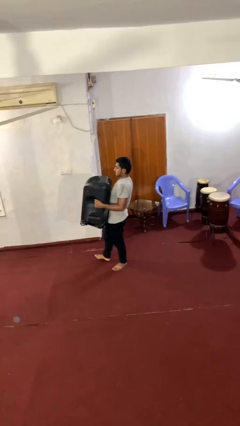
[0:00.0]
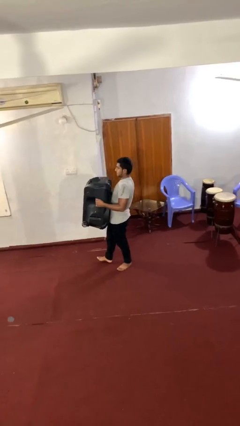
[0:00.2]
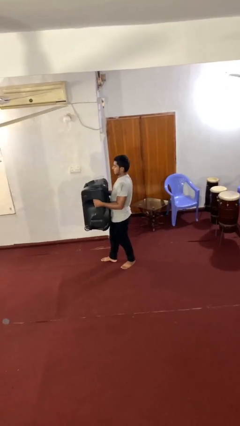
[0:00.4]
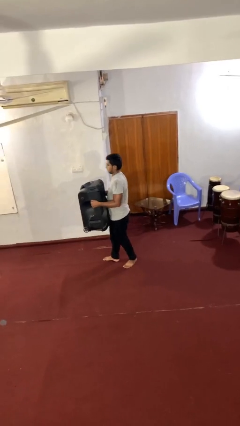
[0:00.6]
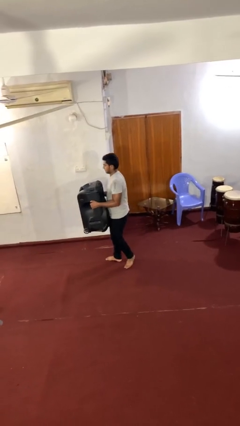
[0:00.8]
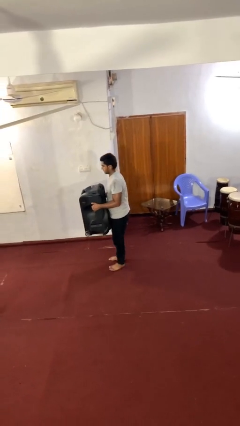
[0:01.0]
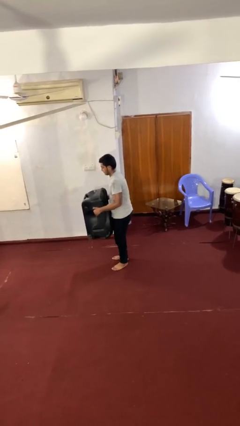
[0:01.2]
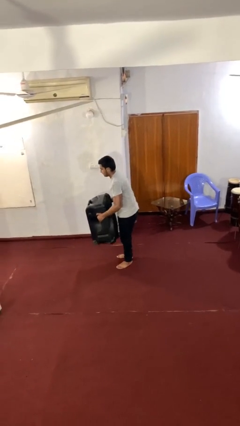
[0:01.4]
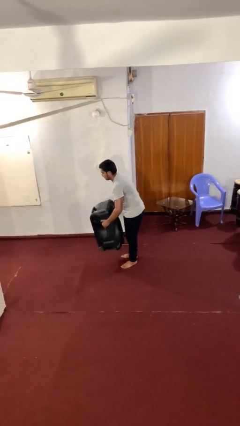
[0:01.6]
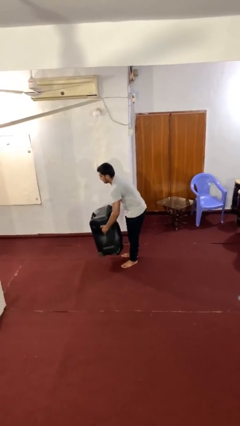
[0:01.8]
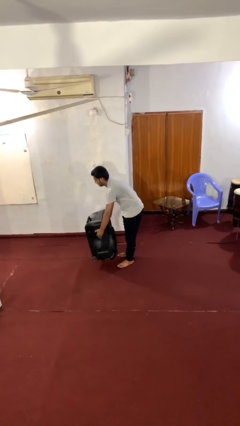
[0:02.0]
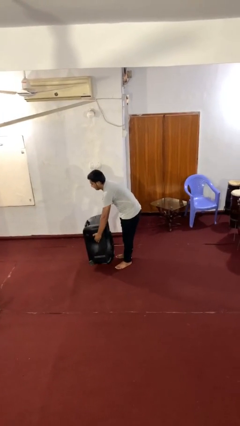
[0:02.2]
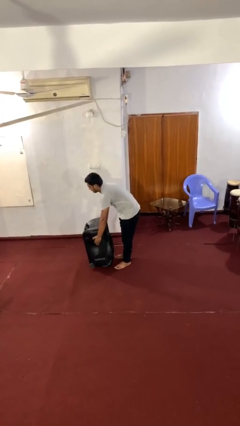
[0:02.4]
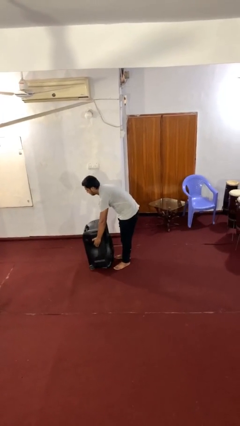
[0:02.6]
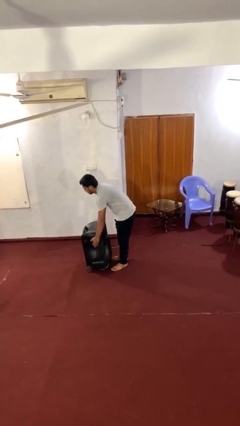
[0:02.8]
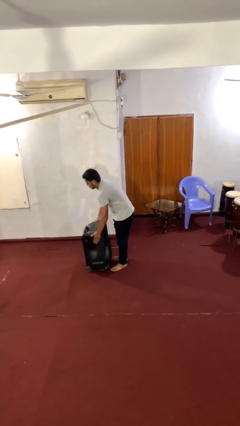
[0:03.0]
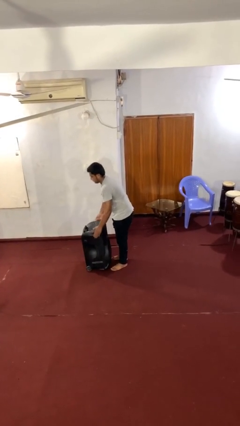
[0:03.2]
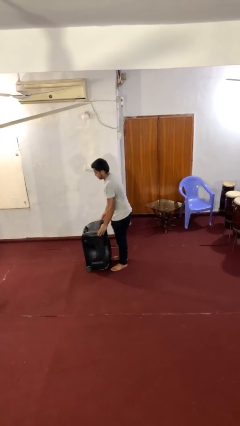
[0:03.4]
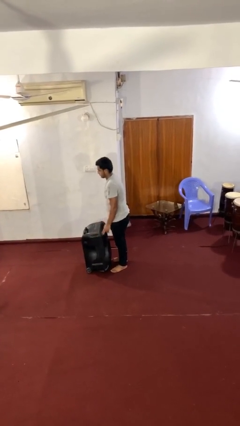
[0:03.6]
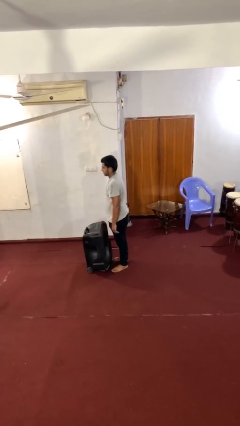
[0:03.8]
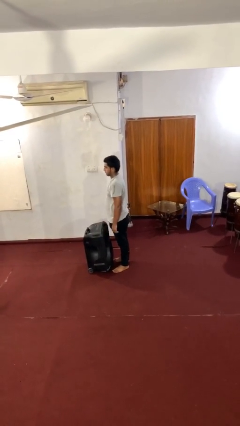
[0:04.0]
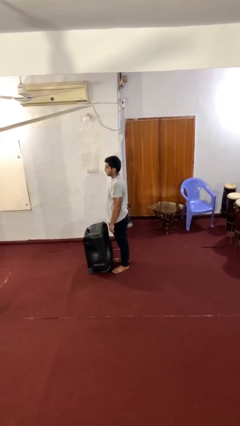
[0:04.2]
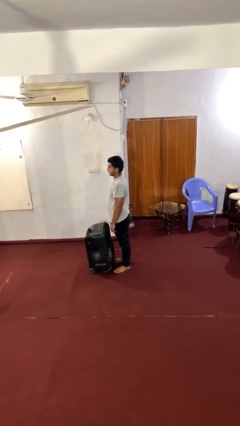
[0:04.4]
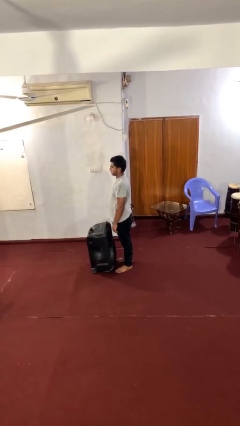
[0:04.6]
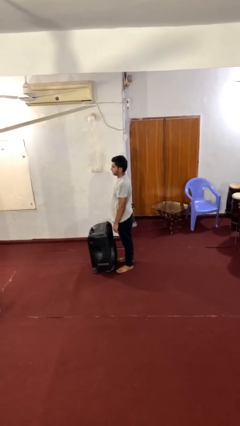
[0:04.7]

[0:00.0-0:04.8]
person puts down object on floor

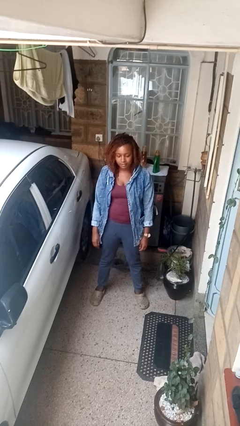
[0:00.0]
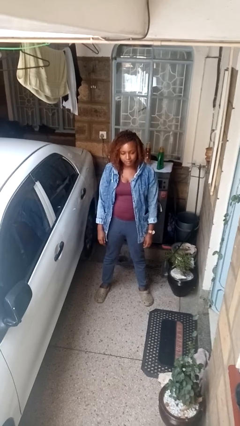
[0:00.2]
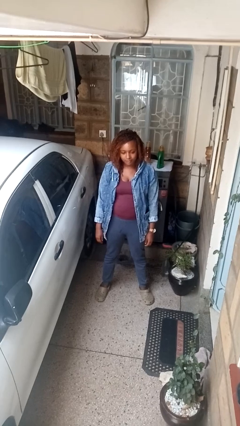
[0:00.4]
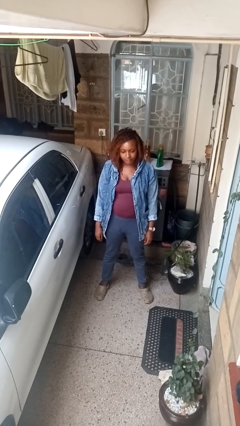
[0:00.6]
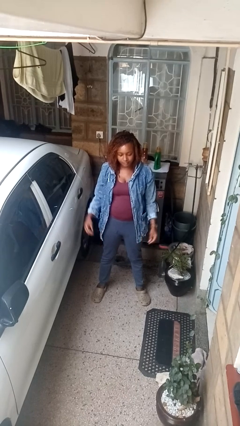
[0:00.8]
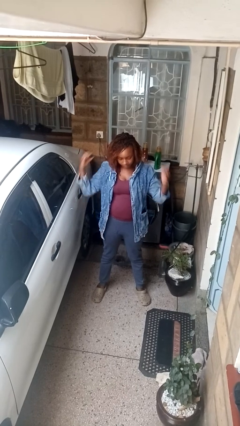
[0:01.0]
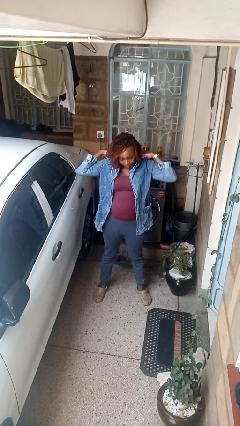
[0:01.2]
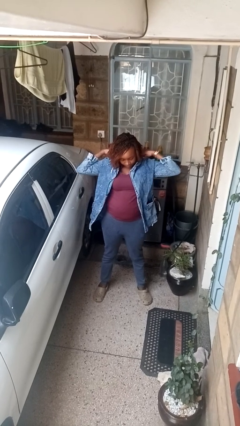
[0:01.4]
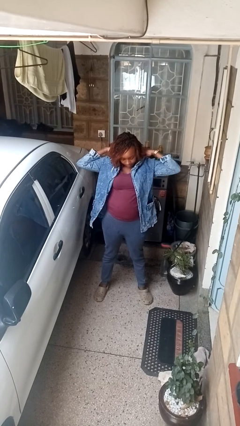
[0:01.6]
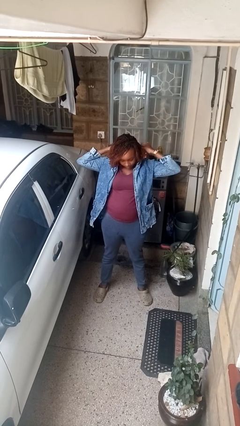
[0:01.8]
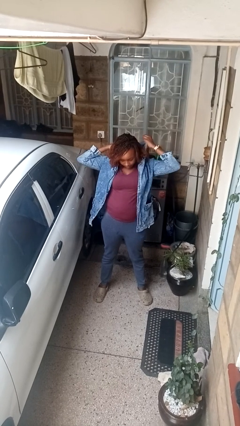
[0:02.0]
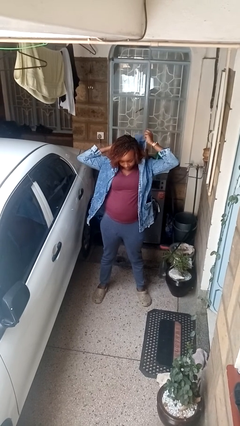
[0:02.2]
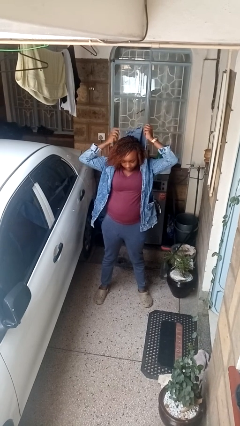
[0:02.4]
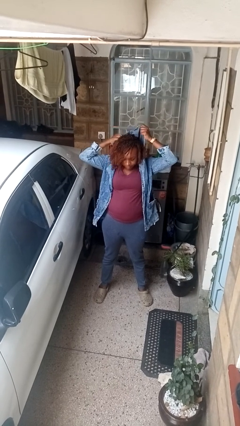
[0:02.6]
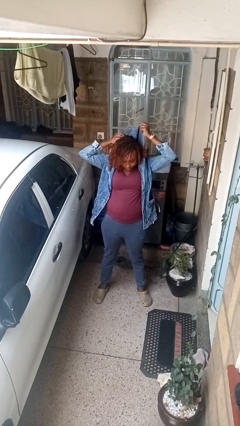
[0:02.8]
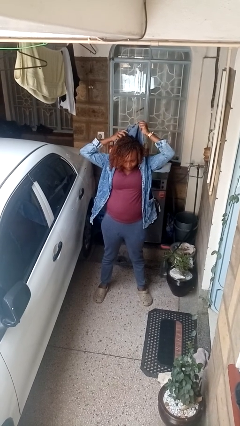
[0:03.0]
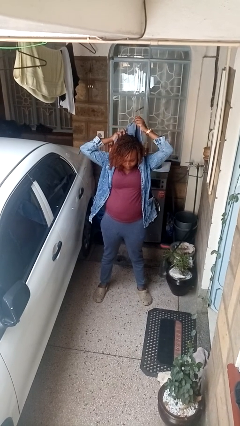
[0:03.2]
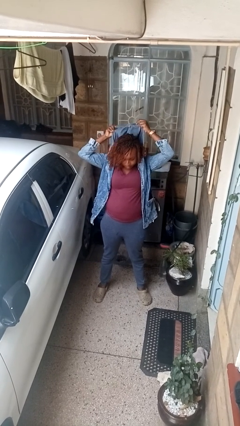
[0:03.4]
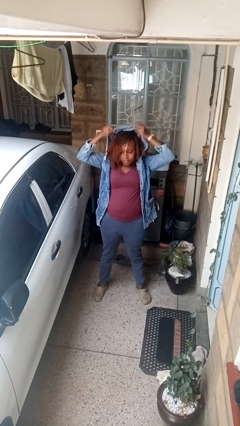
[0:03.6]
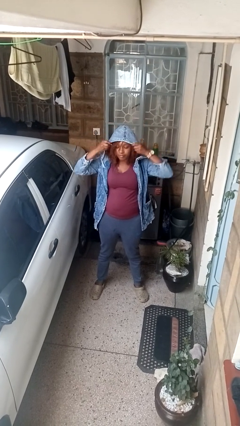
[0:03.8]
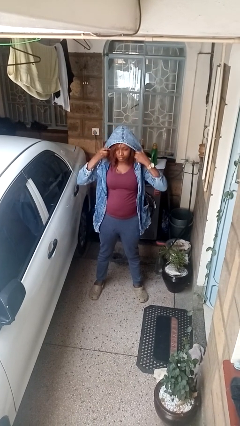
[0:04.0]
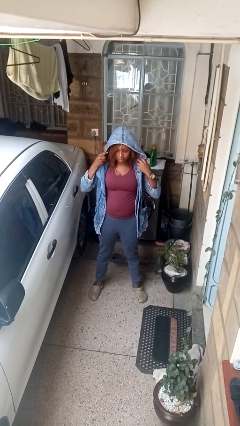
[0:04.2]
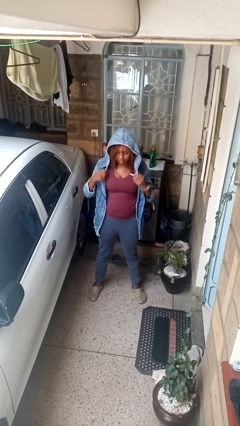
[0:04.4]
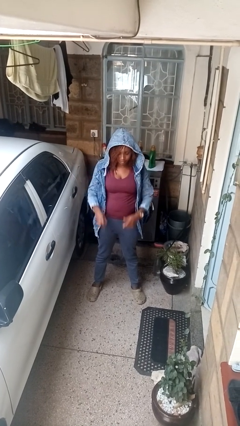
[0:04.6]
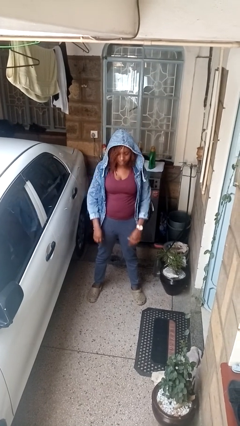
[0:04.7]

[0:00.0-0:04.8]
person puts on hoodie

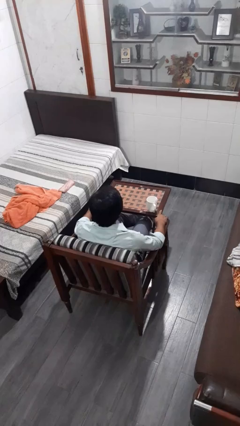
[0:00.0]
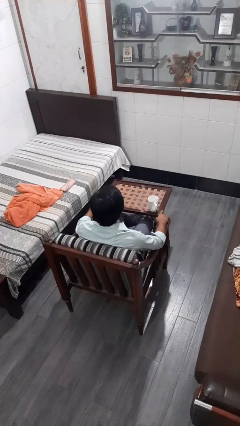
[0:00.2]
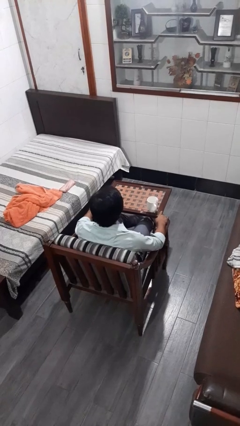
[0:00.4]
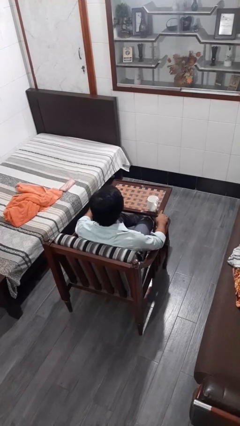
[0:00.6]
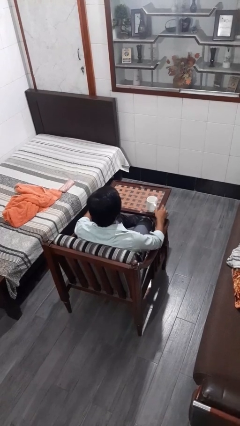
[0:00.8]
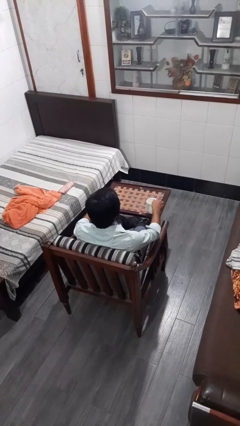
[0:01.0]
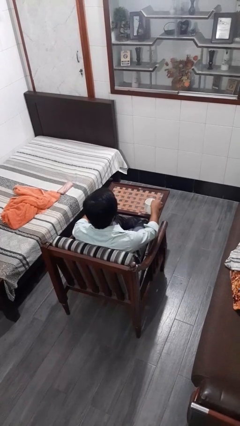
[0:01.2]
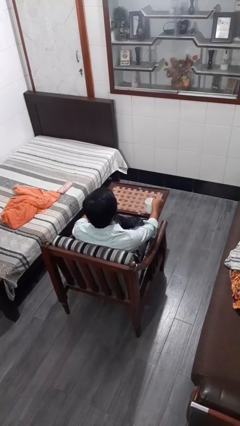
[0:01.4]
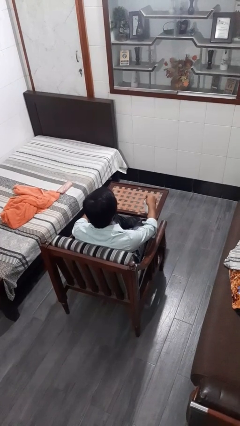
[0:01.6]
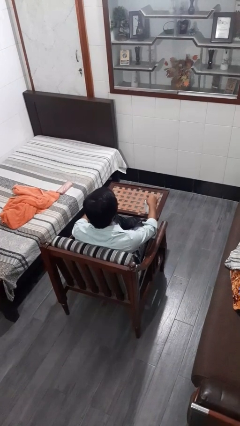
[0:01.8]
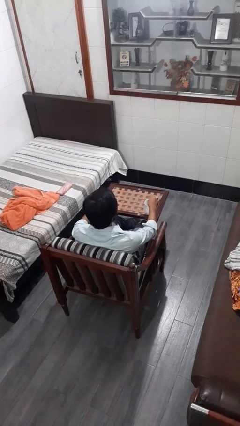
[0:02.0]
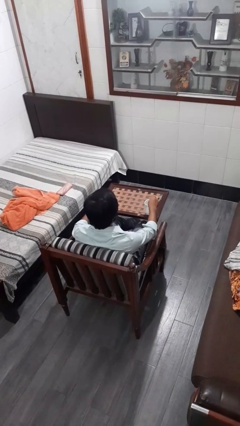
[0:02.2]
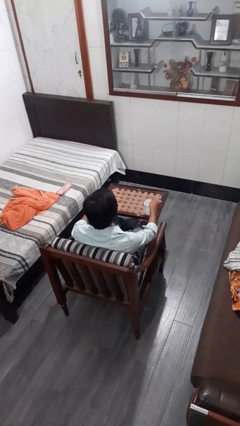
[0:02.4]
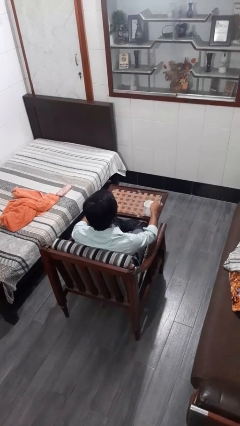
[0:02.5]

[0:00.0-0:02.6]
person stirs mug

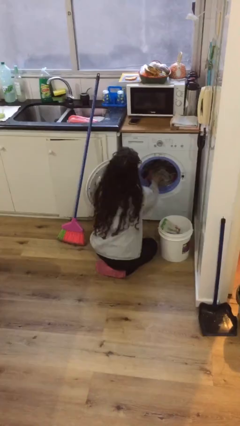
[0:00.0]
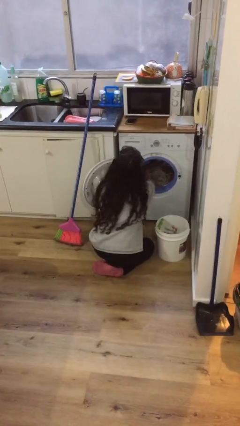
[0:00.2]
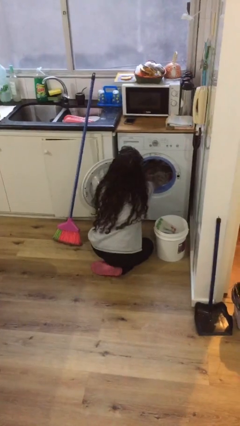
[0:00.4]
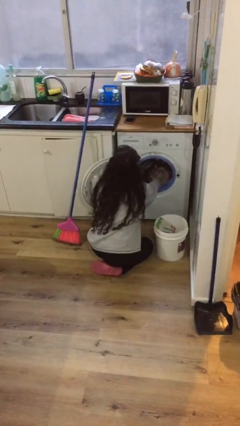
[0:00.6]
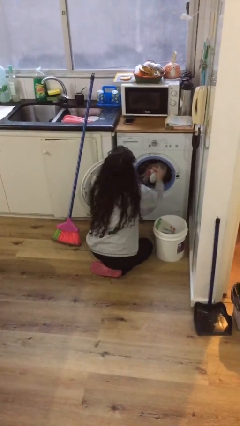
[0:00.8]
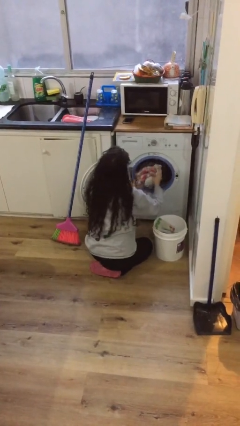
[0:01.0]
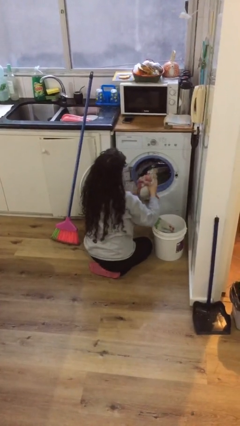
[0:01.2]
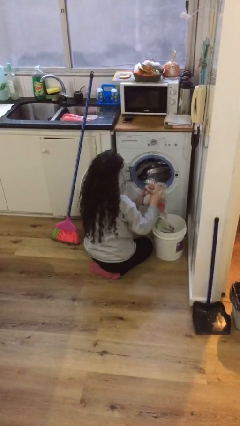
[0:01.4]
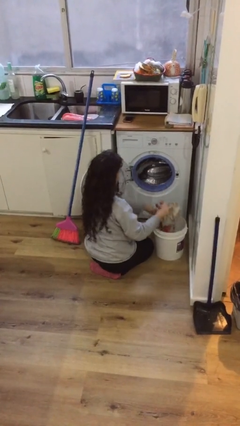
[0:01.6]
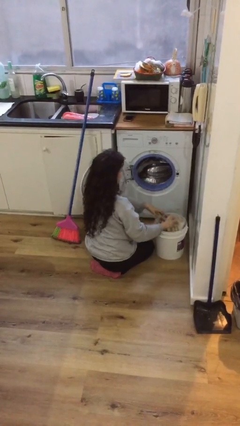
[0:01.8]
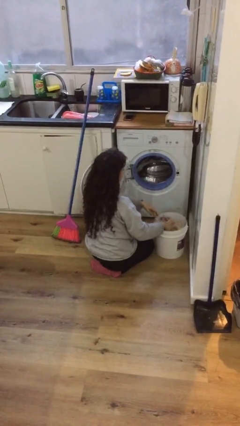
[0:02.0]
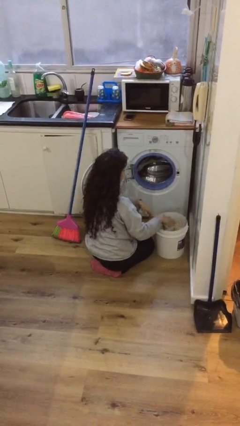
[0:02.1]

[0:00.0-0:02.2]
person unloads clotheswasher

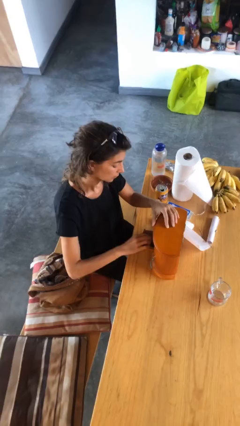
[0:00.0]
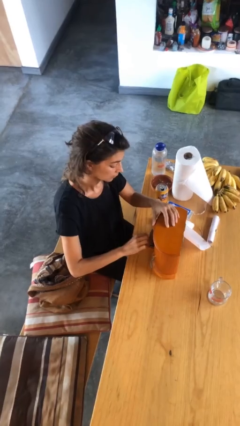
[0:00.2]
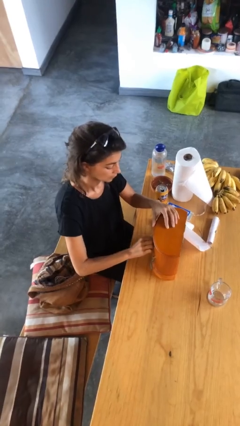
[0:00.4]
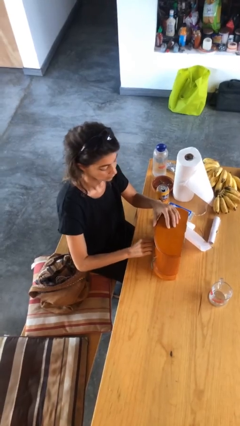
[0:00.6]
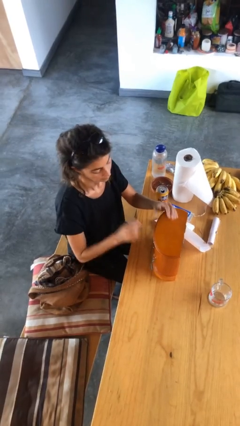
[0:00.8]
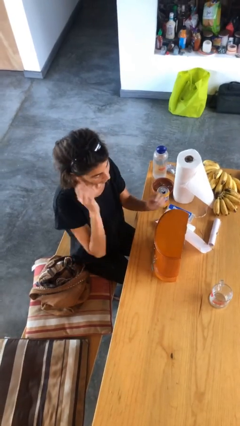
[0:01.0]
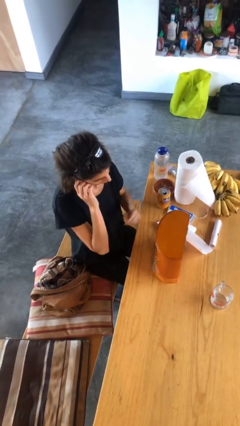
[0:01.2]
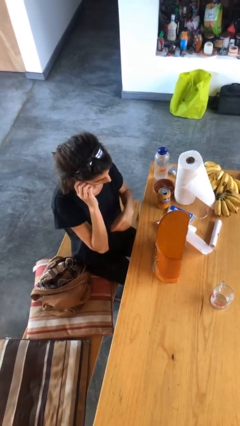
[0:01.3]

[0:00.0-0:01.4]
person closes jewelry box

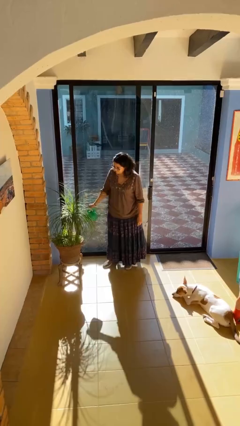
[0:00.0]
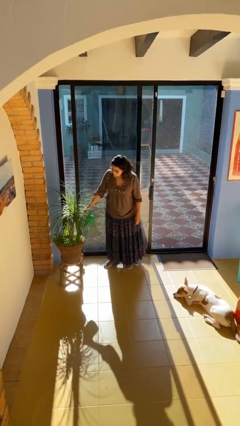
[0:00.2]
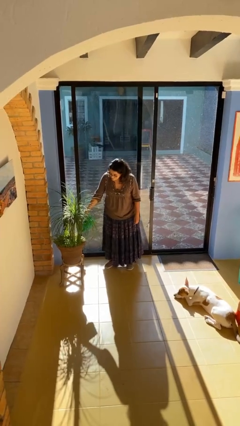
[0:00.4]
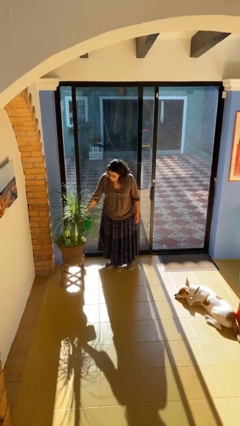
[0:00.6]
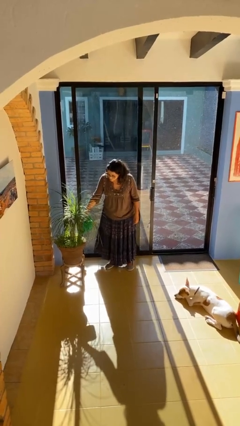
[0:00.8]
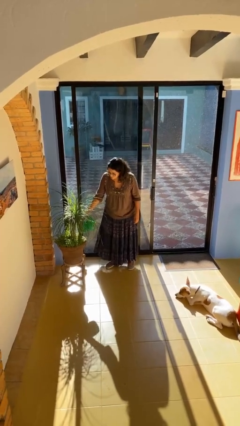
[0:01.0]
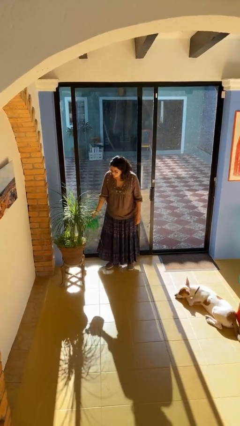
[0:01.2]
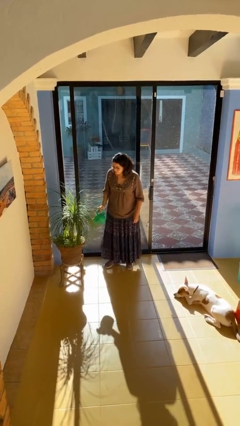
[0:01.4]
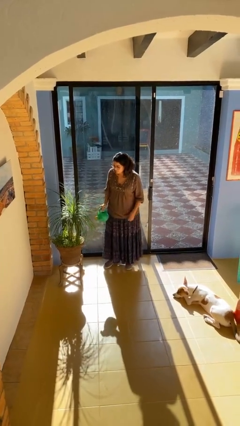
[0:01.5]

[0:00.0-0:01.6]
person waters houseplant
